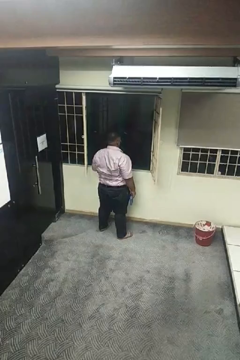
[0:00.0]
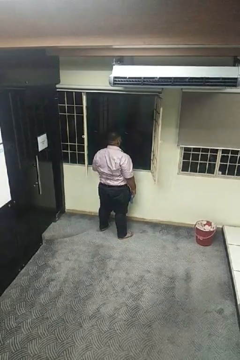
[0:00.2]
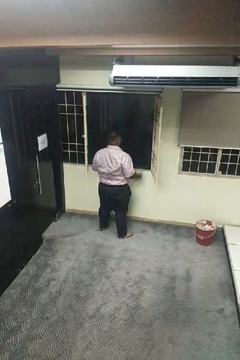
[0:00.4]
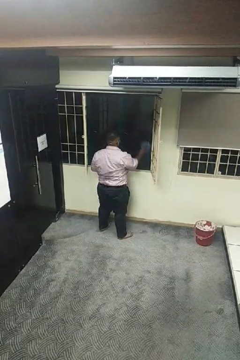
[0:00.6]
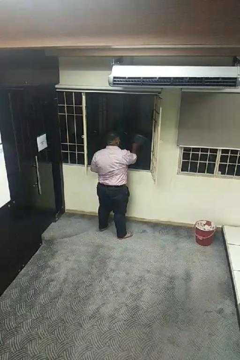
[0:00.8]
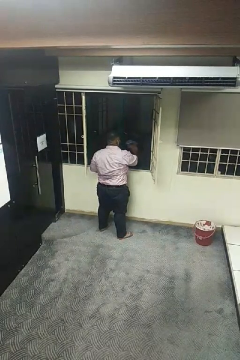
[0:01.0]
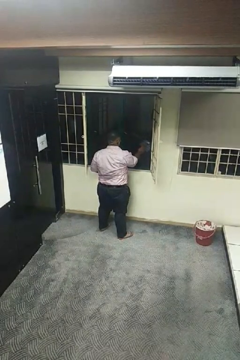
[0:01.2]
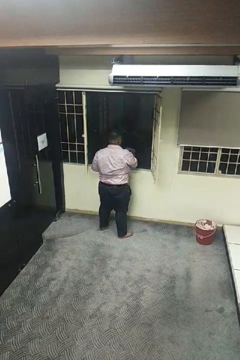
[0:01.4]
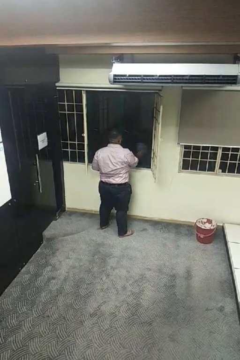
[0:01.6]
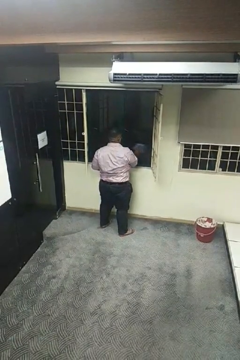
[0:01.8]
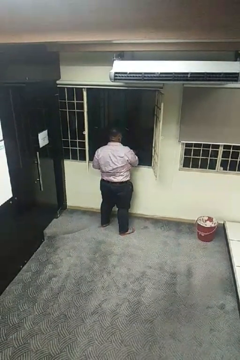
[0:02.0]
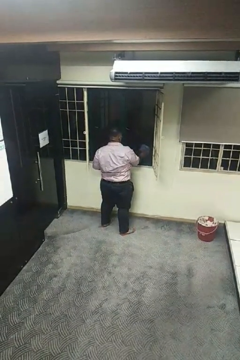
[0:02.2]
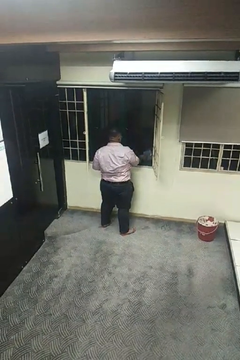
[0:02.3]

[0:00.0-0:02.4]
person washes window

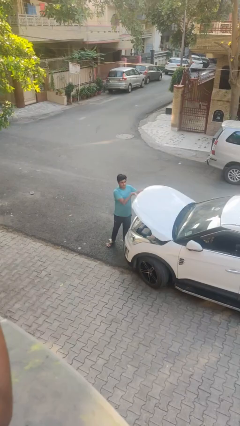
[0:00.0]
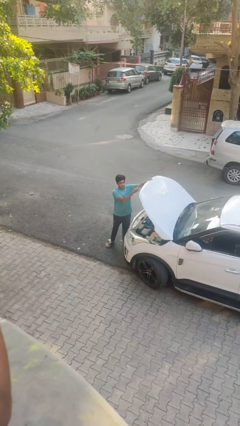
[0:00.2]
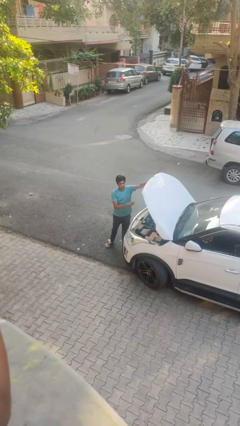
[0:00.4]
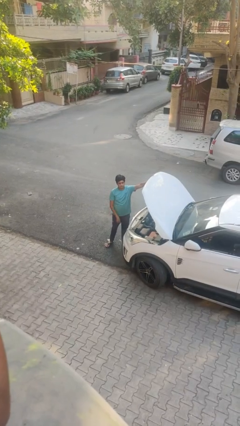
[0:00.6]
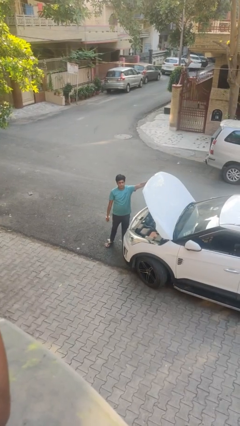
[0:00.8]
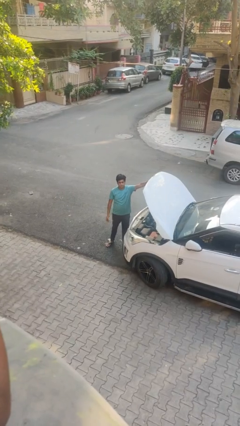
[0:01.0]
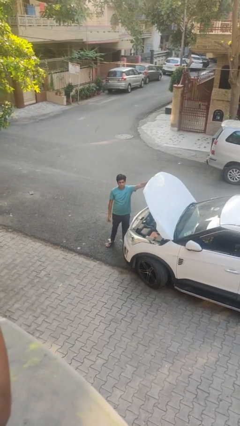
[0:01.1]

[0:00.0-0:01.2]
person opens car hood

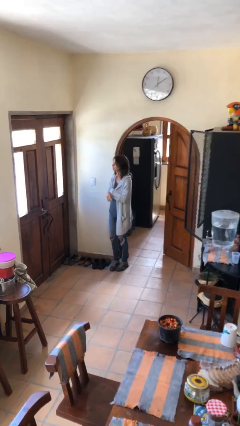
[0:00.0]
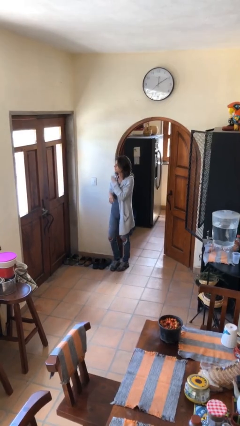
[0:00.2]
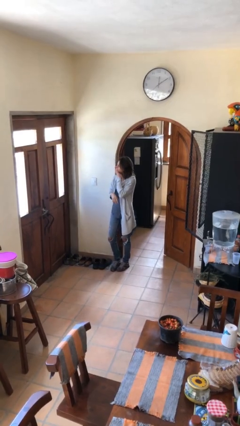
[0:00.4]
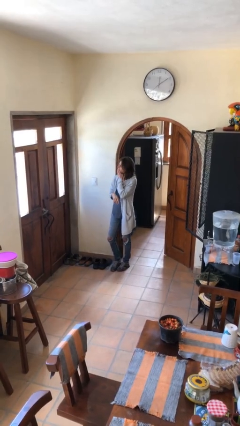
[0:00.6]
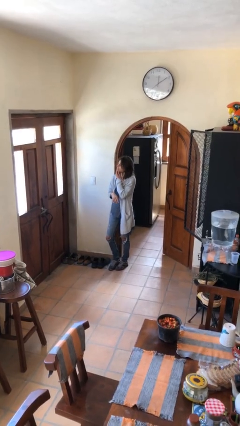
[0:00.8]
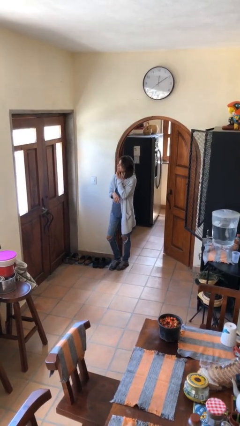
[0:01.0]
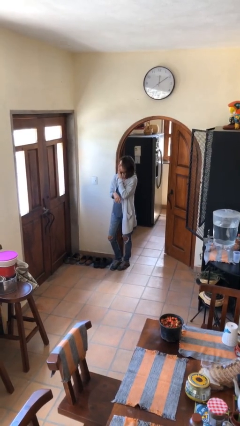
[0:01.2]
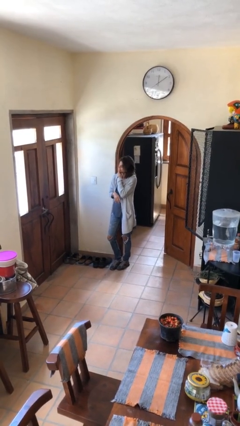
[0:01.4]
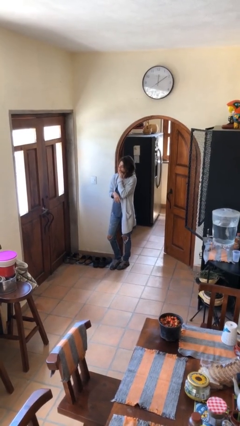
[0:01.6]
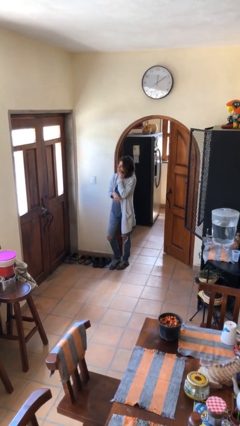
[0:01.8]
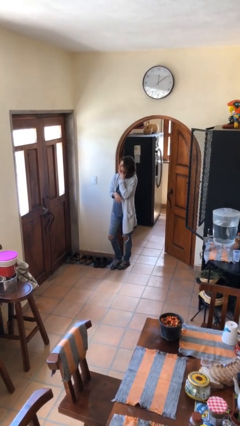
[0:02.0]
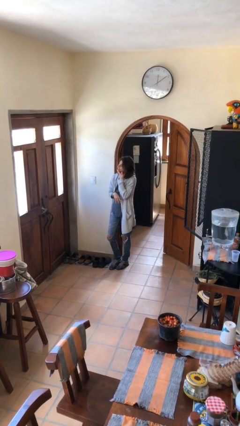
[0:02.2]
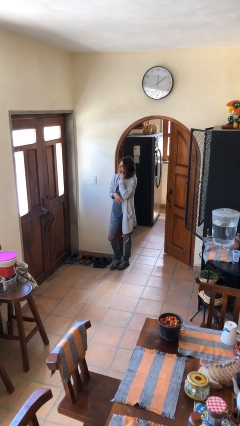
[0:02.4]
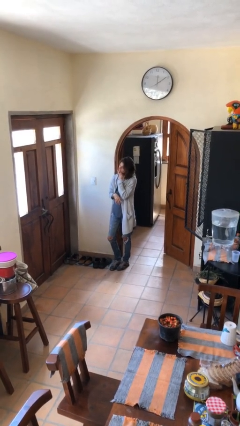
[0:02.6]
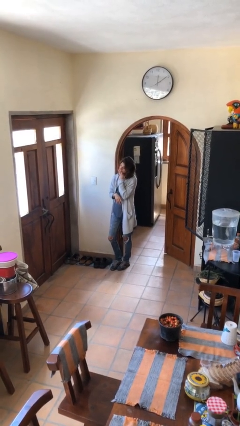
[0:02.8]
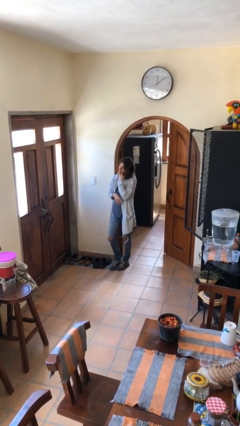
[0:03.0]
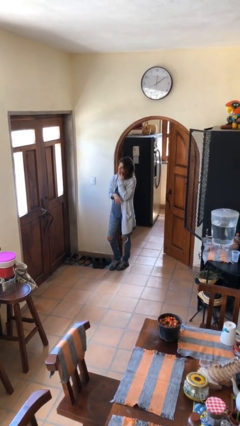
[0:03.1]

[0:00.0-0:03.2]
person strokes chin

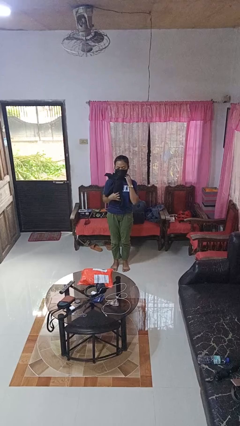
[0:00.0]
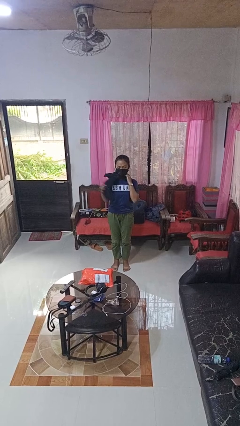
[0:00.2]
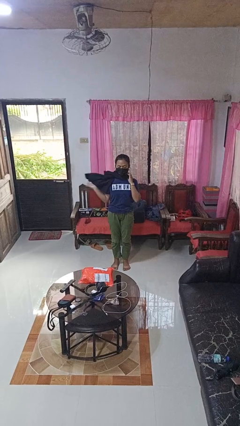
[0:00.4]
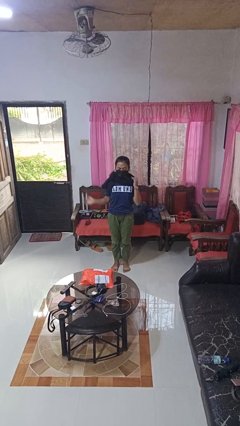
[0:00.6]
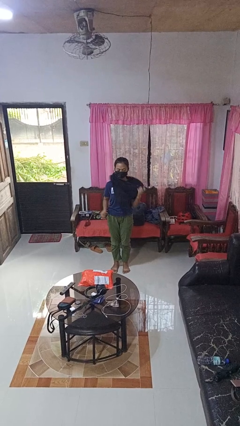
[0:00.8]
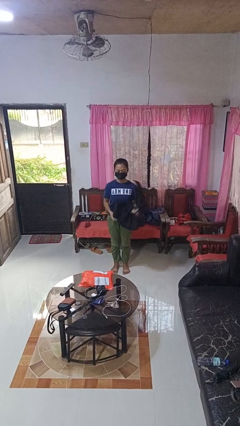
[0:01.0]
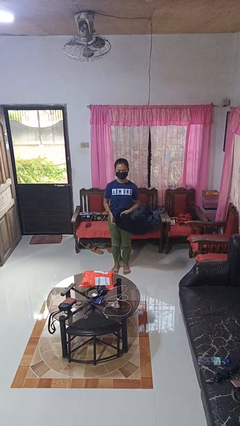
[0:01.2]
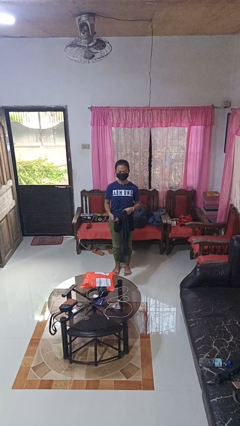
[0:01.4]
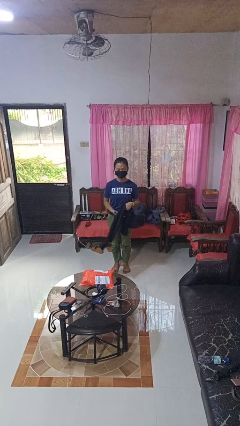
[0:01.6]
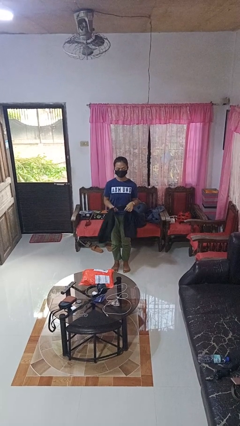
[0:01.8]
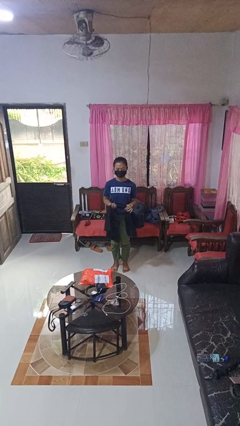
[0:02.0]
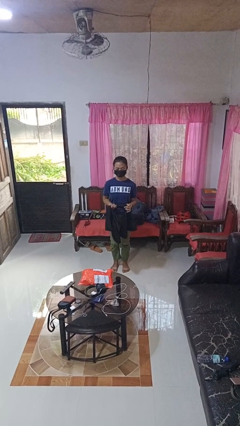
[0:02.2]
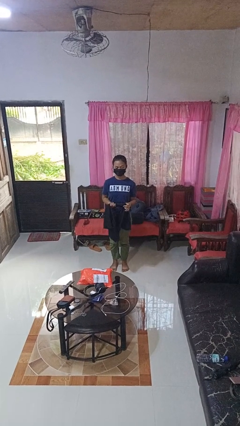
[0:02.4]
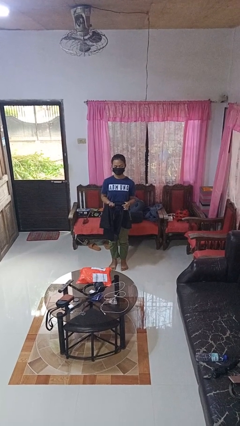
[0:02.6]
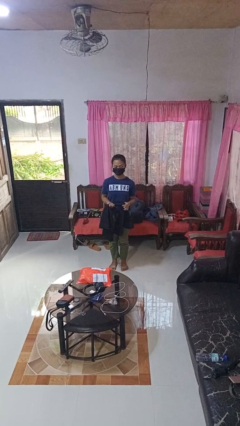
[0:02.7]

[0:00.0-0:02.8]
person takes off scarf

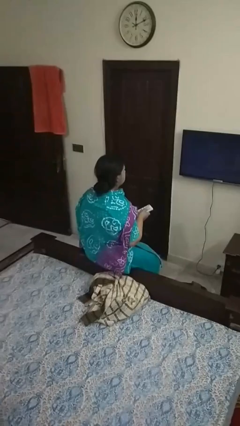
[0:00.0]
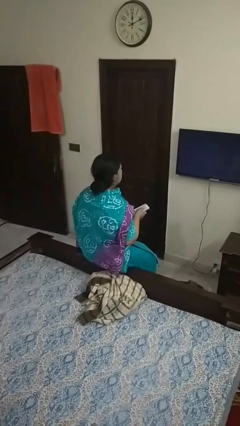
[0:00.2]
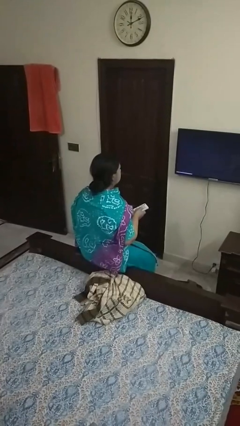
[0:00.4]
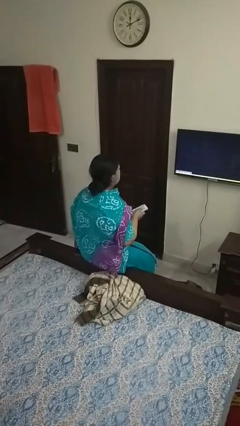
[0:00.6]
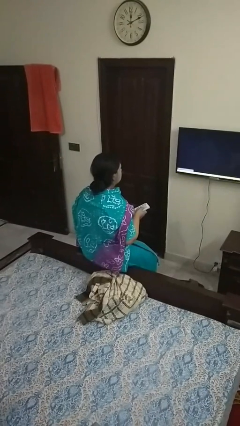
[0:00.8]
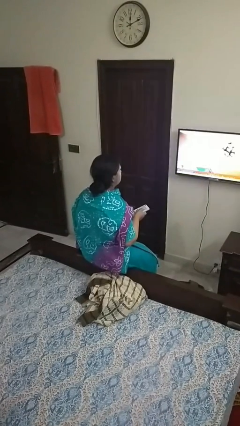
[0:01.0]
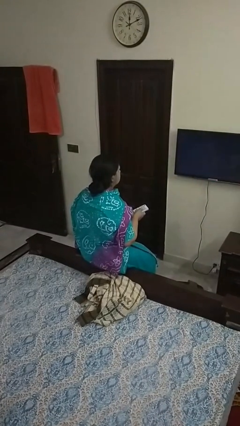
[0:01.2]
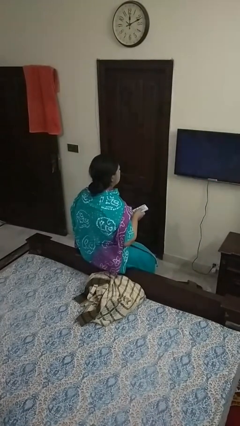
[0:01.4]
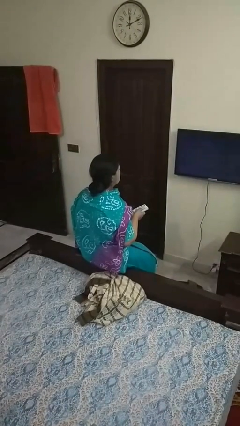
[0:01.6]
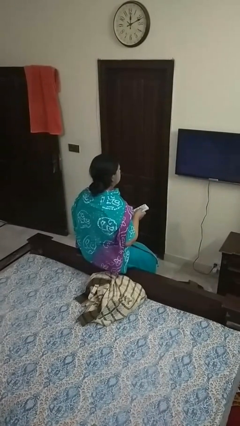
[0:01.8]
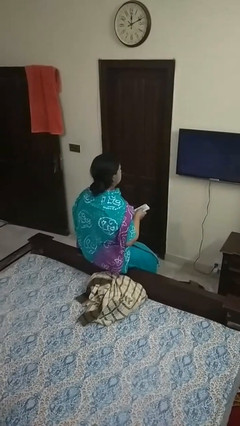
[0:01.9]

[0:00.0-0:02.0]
person uses television remote

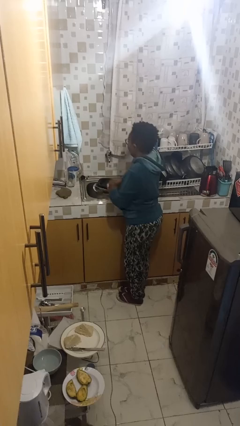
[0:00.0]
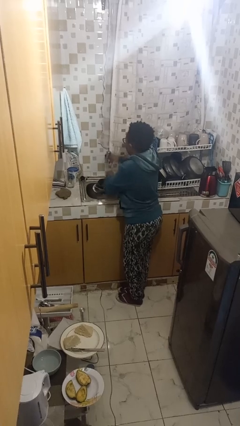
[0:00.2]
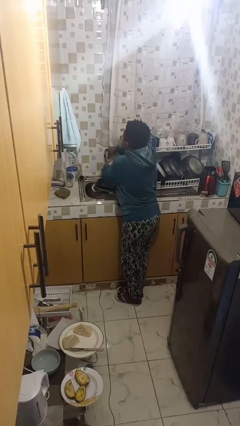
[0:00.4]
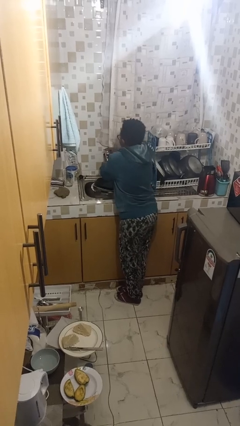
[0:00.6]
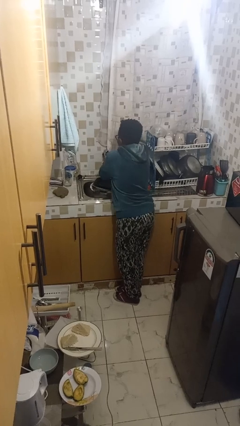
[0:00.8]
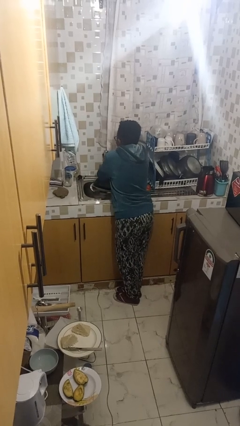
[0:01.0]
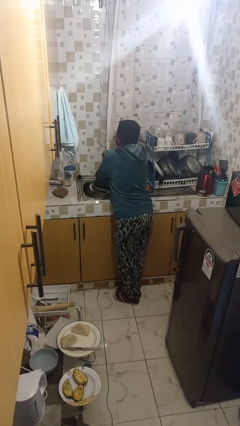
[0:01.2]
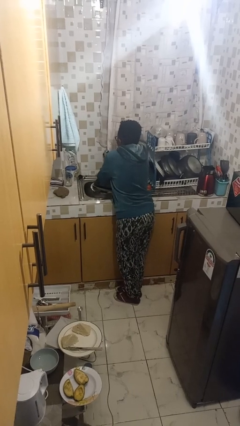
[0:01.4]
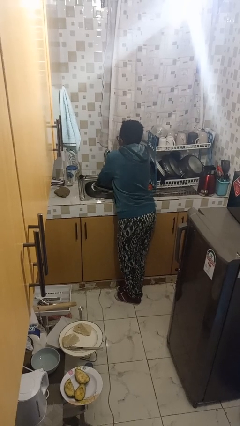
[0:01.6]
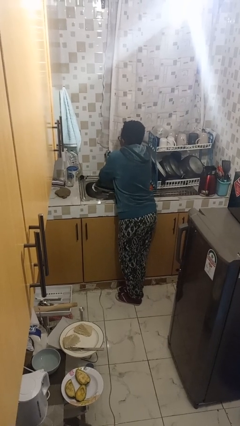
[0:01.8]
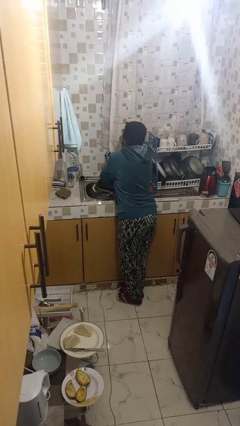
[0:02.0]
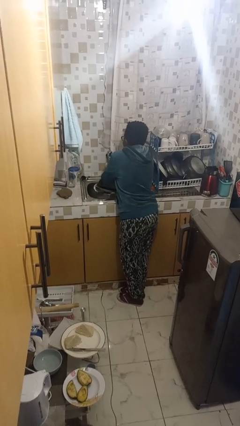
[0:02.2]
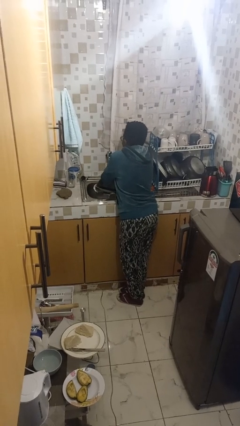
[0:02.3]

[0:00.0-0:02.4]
person washes hands

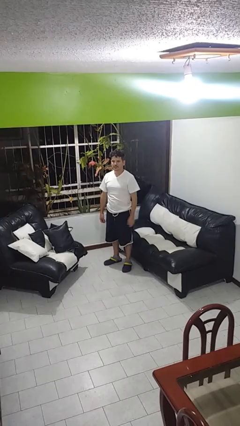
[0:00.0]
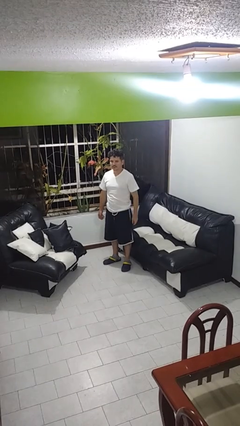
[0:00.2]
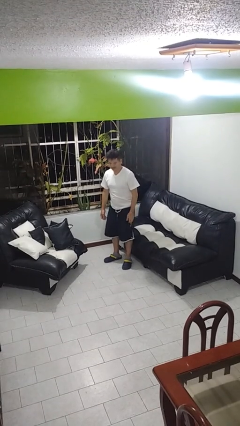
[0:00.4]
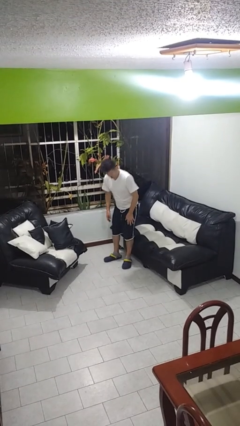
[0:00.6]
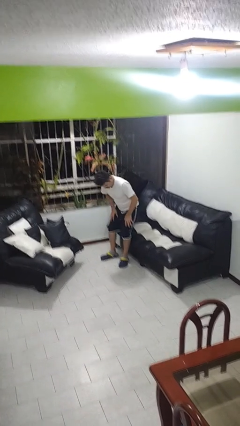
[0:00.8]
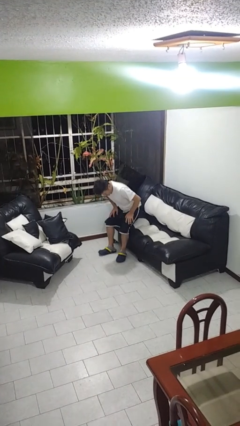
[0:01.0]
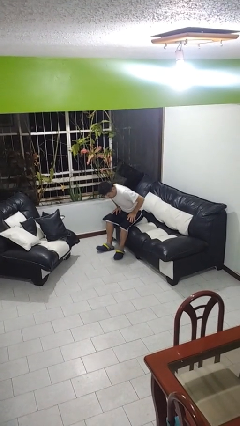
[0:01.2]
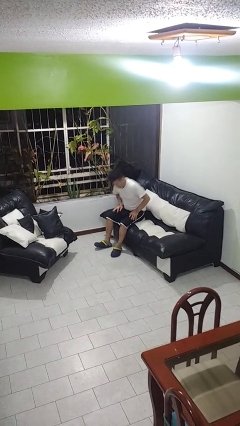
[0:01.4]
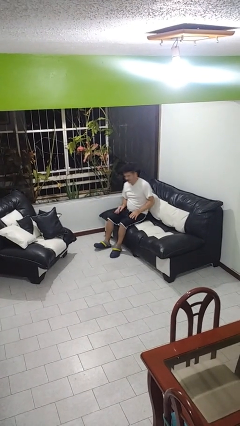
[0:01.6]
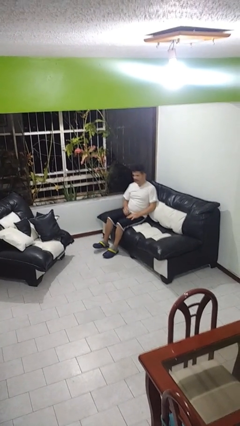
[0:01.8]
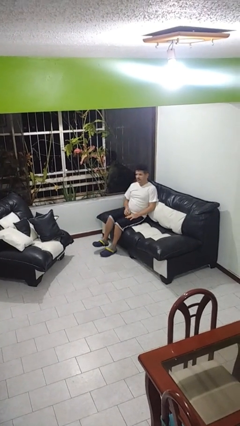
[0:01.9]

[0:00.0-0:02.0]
person lies down on couch

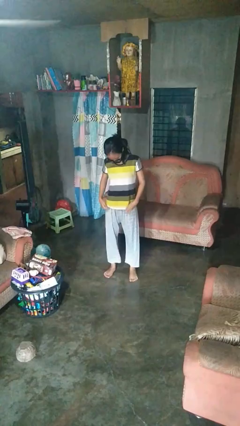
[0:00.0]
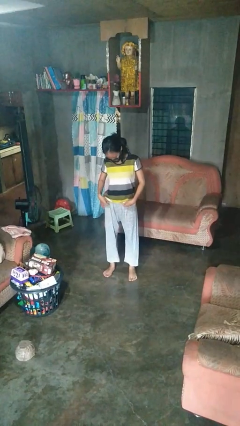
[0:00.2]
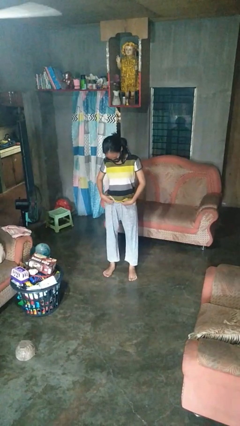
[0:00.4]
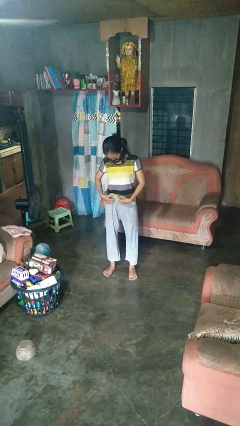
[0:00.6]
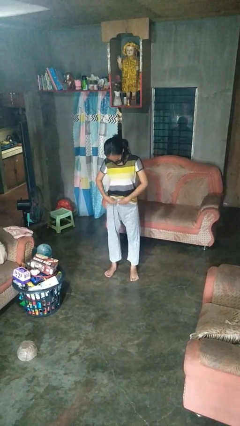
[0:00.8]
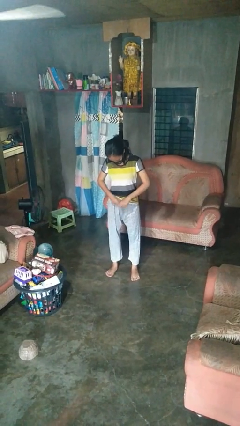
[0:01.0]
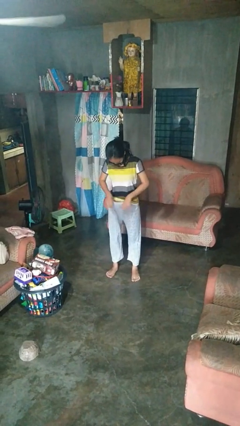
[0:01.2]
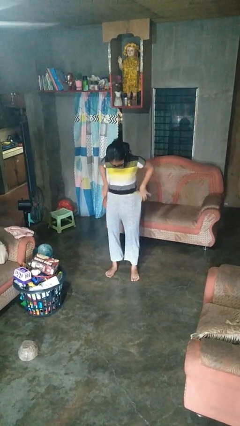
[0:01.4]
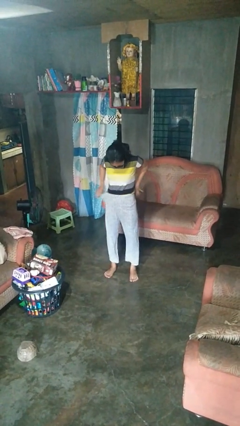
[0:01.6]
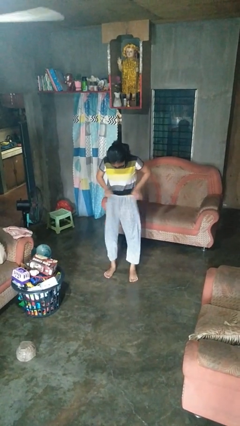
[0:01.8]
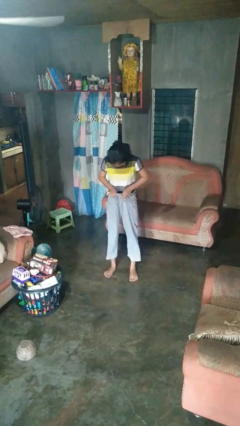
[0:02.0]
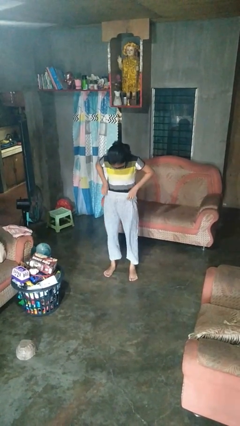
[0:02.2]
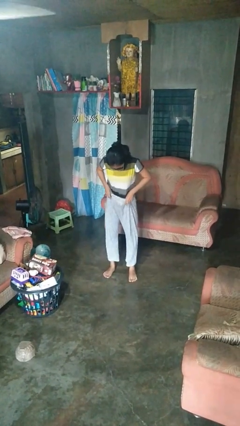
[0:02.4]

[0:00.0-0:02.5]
person tucks in shirt
